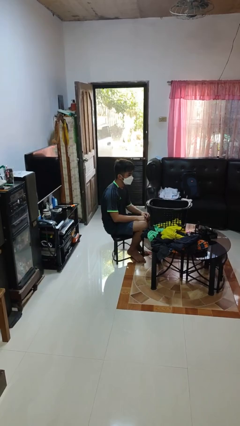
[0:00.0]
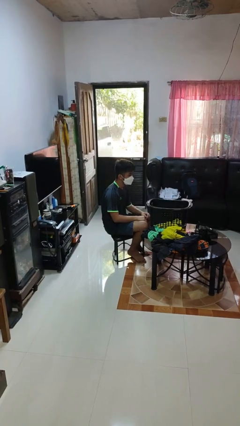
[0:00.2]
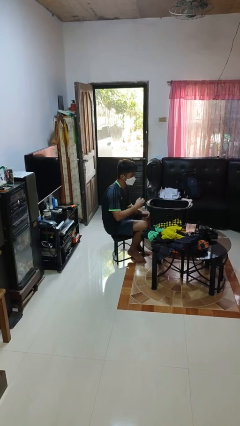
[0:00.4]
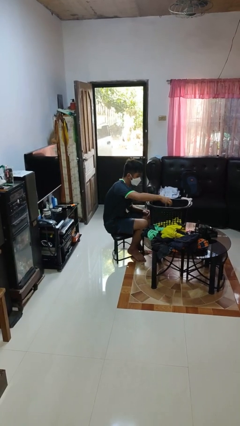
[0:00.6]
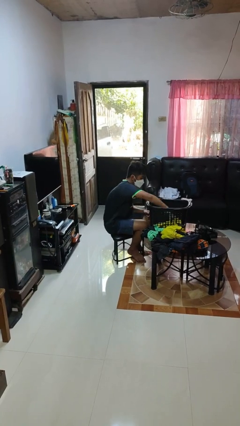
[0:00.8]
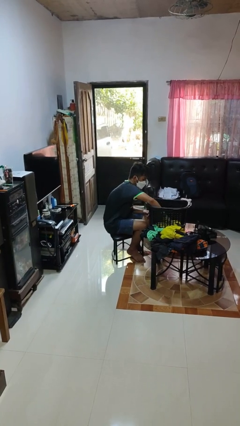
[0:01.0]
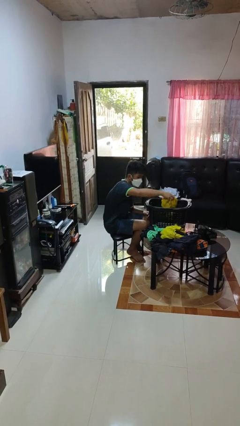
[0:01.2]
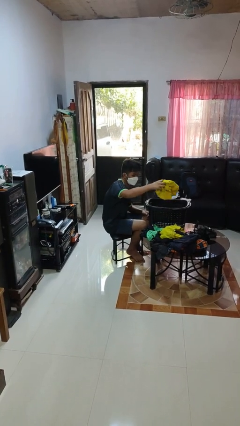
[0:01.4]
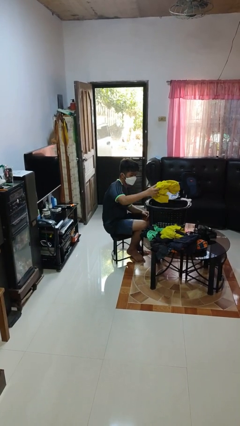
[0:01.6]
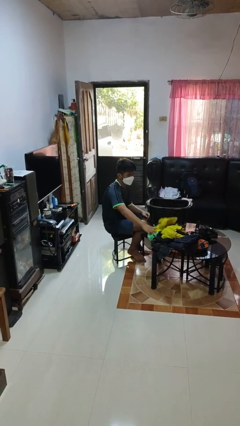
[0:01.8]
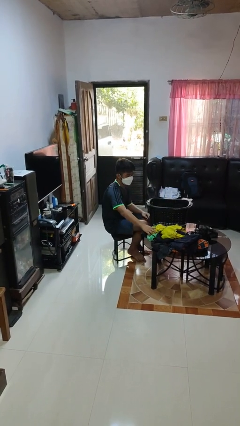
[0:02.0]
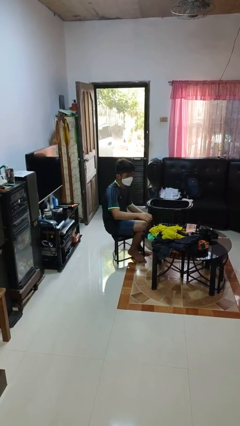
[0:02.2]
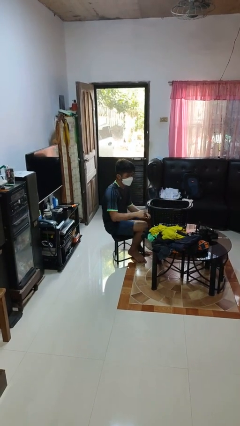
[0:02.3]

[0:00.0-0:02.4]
person takes object from basket

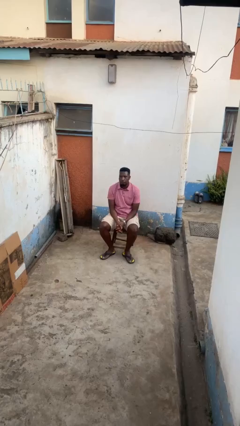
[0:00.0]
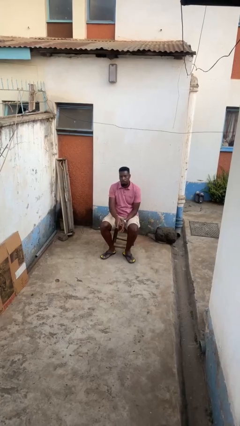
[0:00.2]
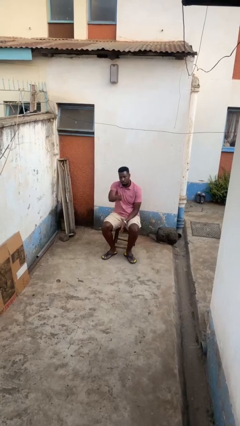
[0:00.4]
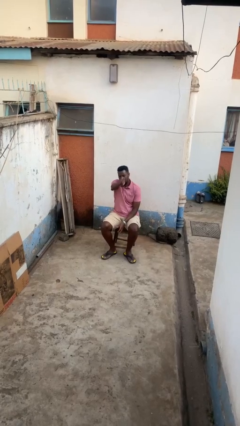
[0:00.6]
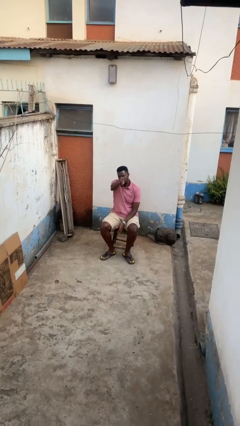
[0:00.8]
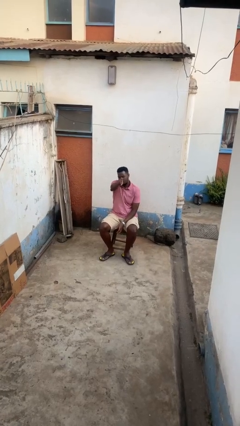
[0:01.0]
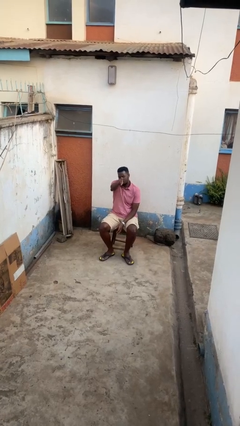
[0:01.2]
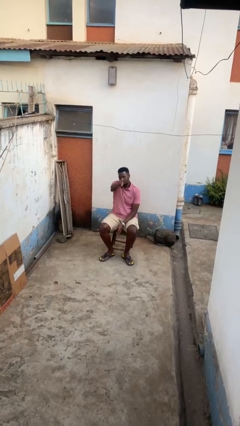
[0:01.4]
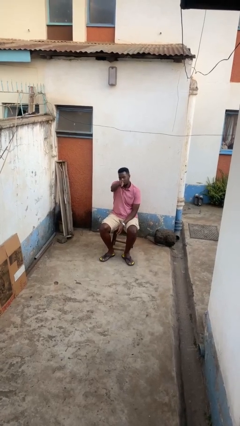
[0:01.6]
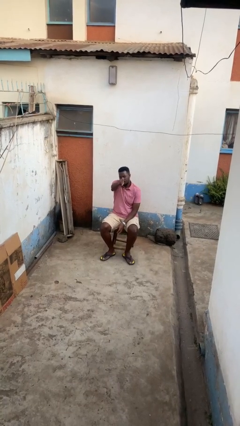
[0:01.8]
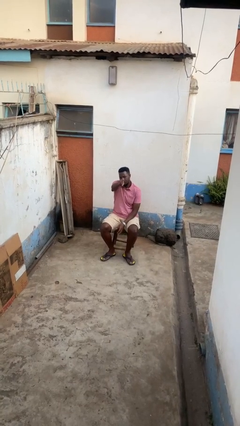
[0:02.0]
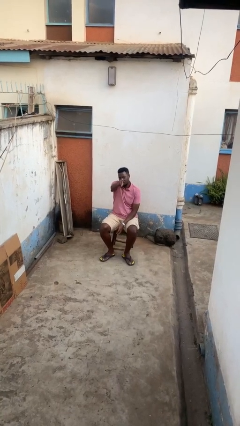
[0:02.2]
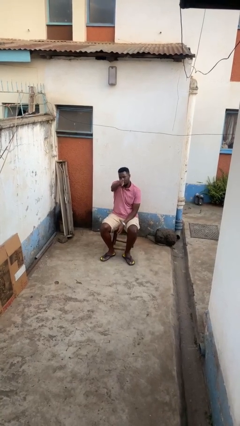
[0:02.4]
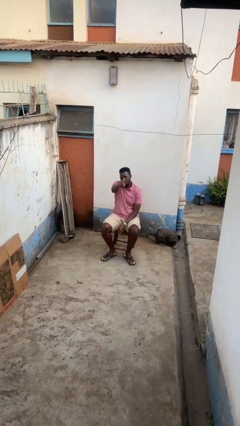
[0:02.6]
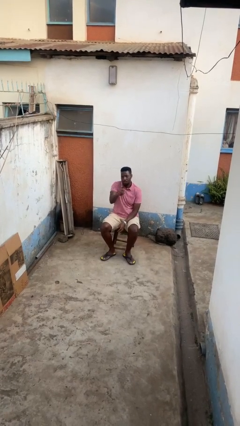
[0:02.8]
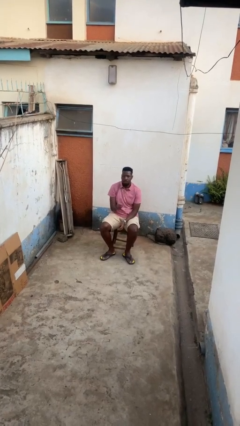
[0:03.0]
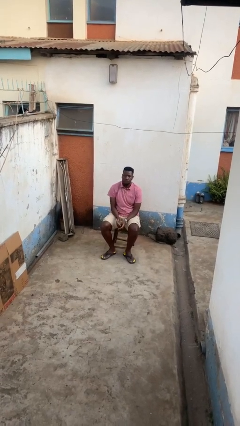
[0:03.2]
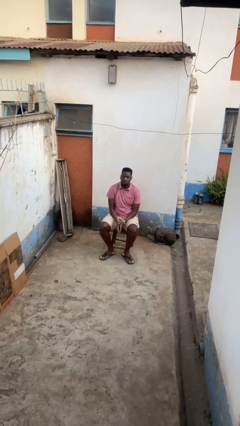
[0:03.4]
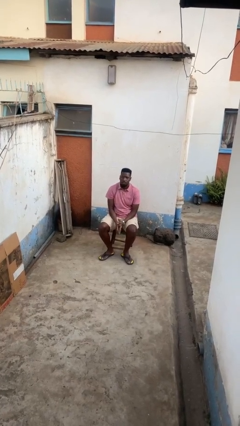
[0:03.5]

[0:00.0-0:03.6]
person points at person

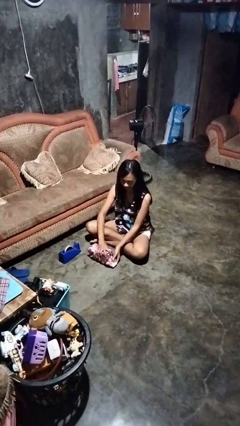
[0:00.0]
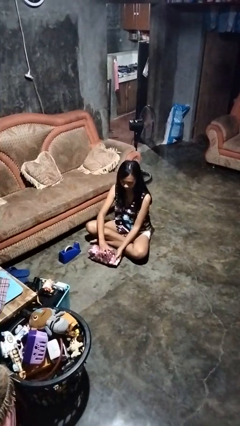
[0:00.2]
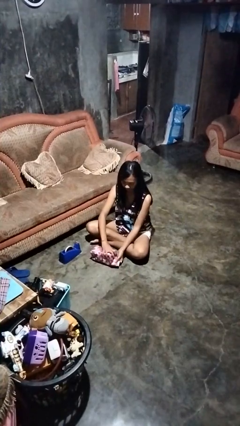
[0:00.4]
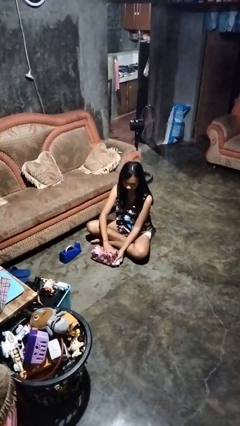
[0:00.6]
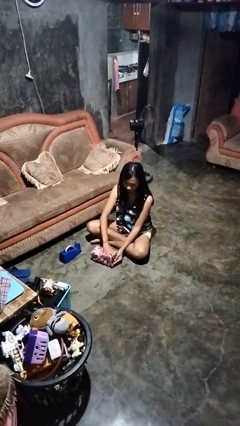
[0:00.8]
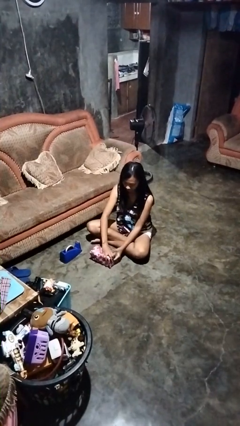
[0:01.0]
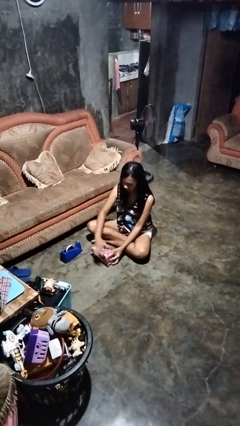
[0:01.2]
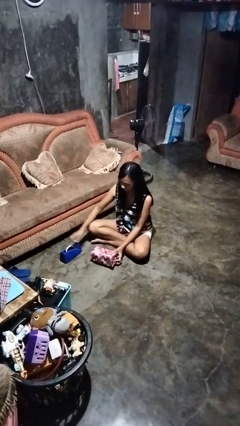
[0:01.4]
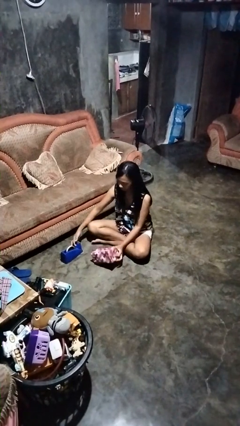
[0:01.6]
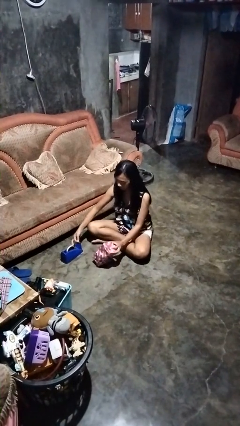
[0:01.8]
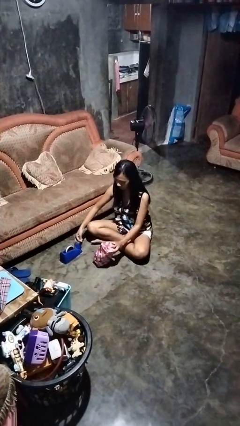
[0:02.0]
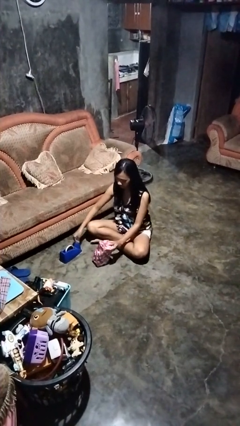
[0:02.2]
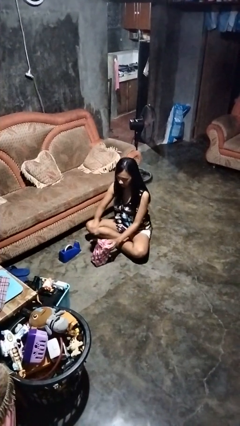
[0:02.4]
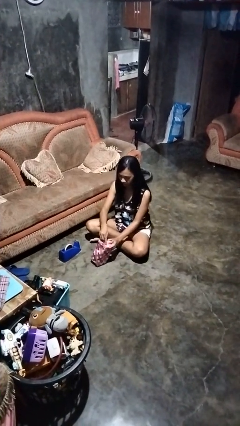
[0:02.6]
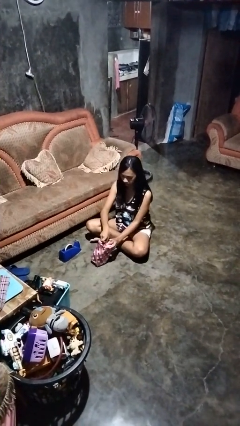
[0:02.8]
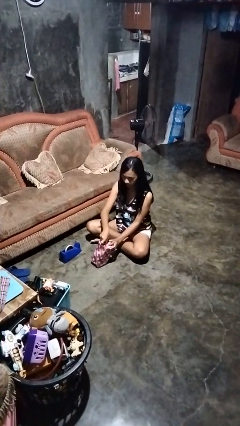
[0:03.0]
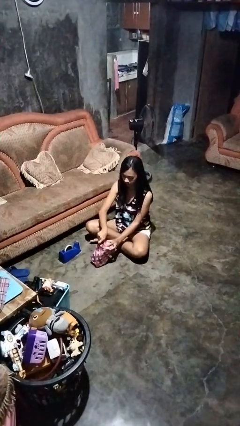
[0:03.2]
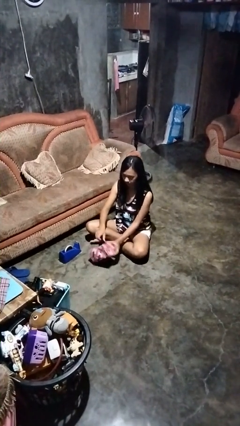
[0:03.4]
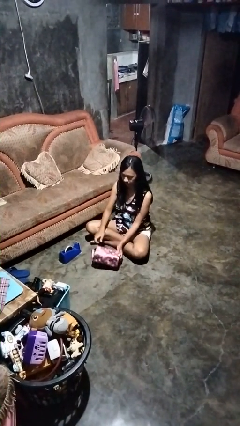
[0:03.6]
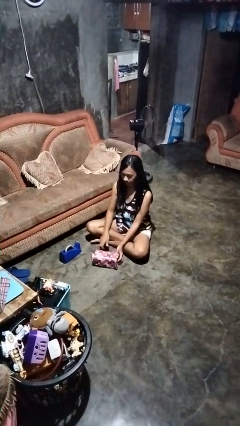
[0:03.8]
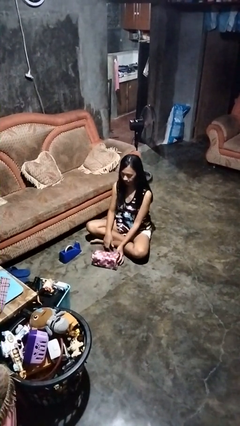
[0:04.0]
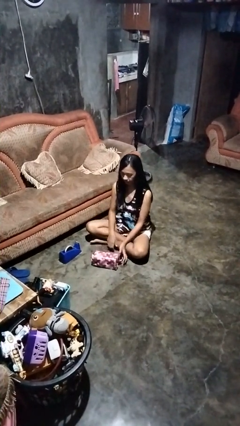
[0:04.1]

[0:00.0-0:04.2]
person wraps box

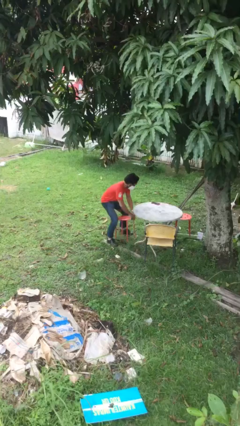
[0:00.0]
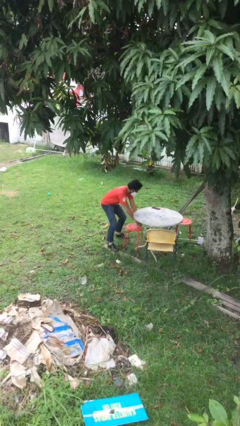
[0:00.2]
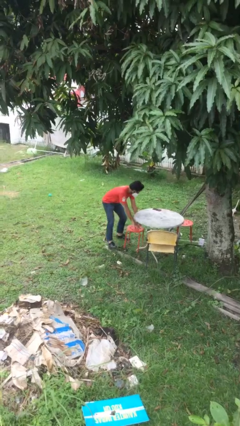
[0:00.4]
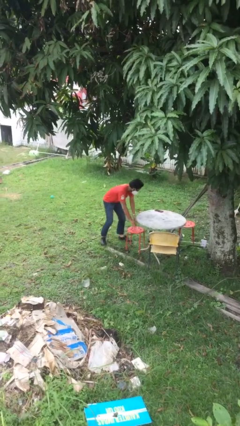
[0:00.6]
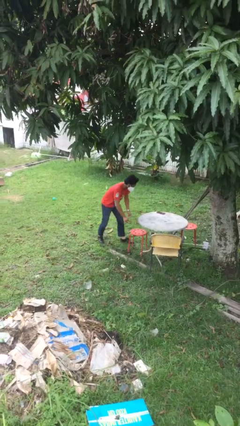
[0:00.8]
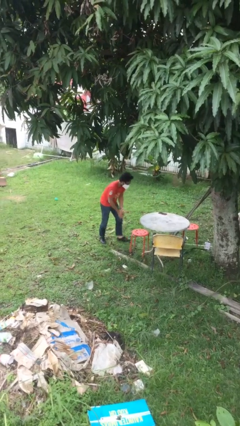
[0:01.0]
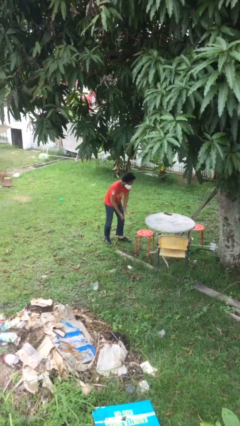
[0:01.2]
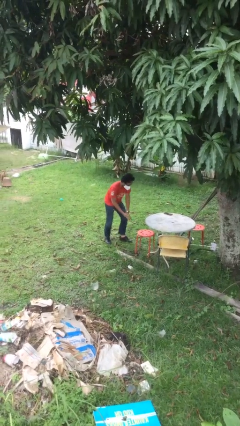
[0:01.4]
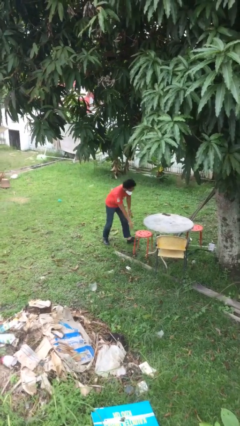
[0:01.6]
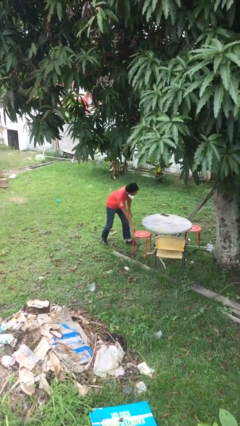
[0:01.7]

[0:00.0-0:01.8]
person stands up

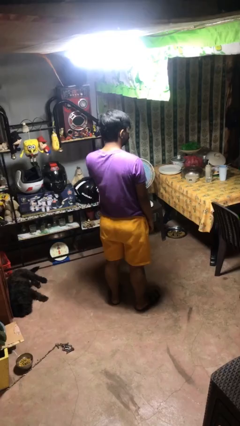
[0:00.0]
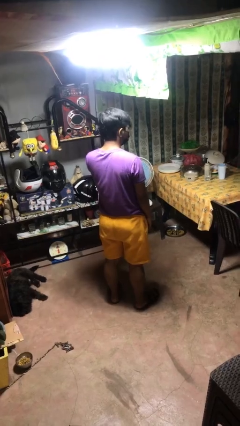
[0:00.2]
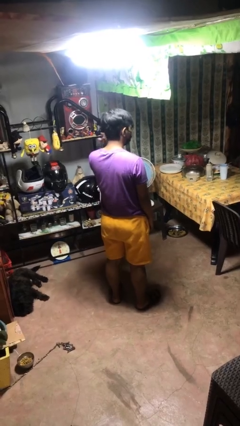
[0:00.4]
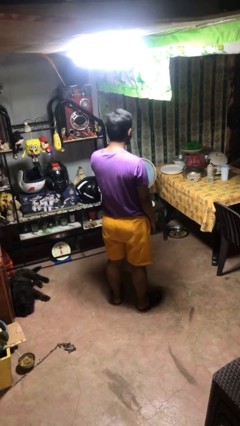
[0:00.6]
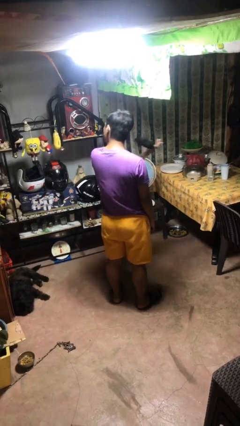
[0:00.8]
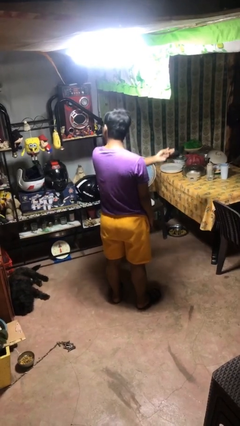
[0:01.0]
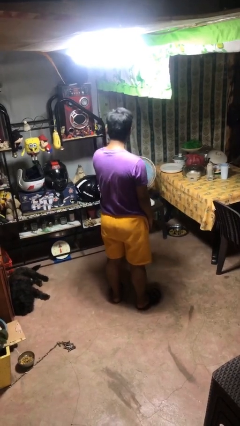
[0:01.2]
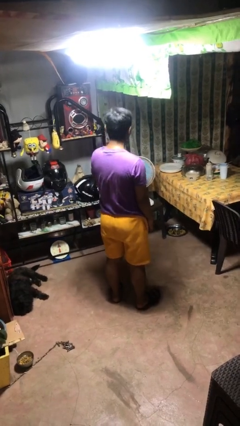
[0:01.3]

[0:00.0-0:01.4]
person takes off facemask

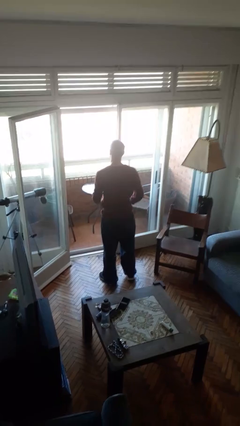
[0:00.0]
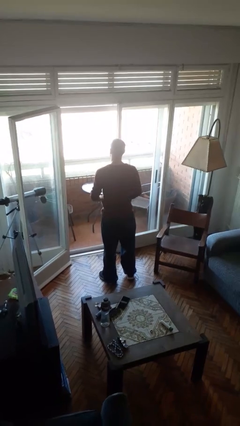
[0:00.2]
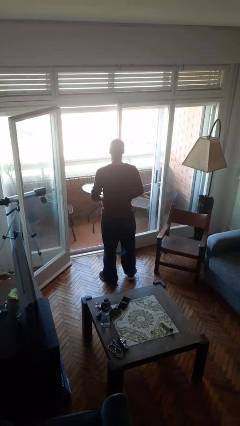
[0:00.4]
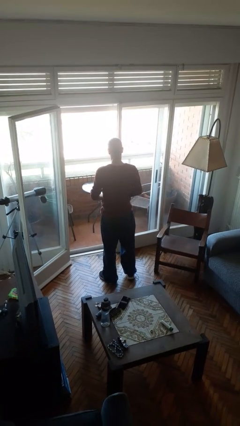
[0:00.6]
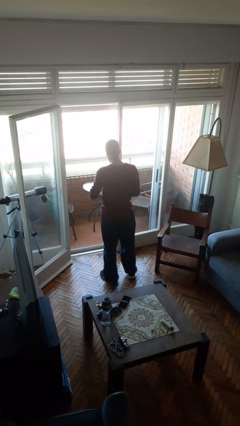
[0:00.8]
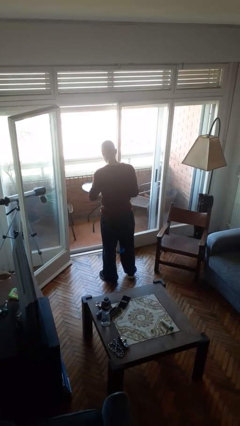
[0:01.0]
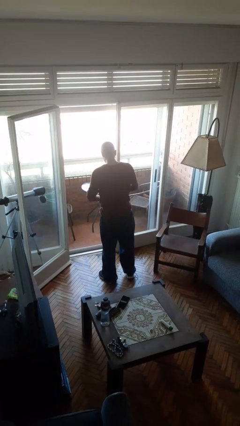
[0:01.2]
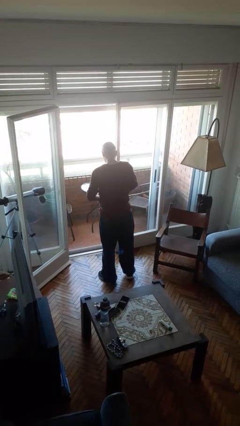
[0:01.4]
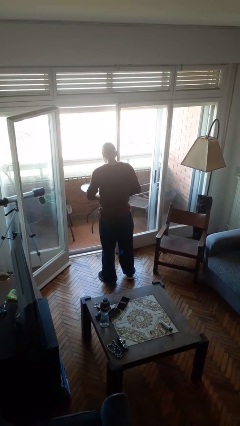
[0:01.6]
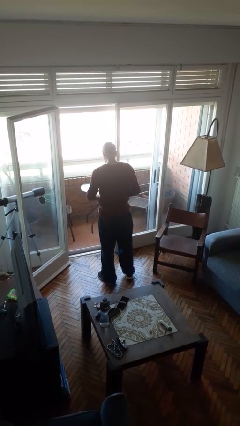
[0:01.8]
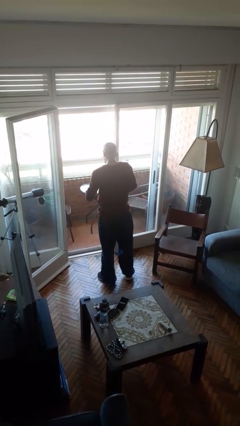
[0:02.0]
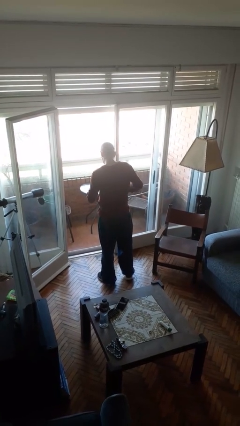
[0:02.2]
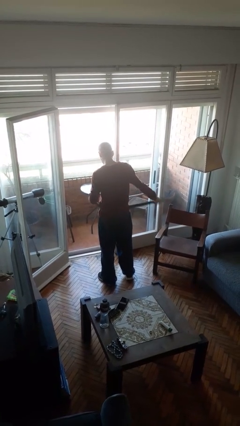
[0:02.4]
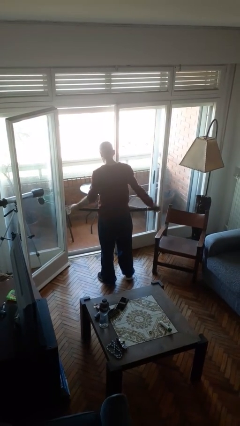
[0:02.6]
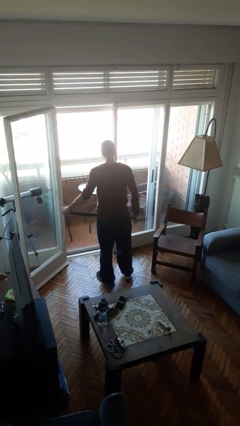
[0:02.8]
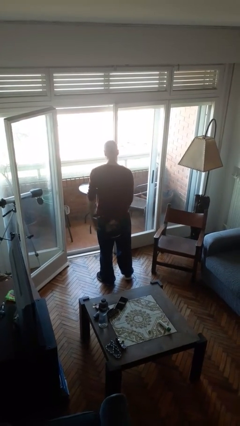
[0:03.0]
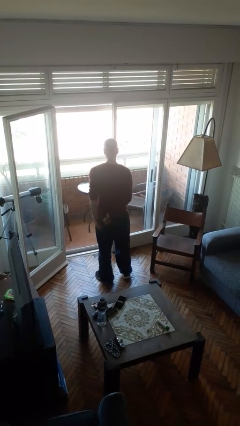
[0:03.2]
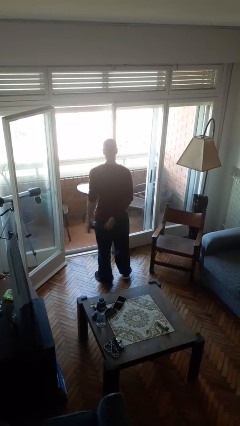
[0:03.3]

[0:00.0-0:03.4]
person takes off belt

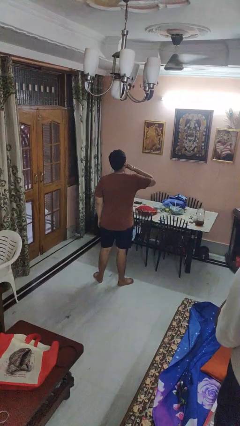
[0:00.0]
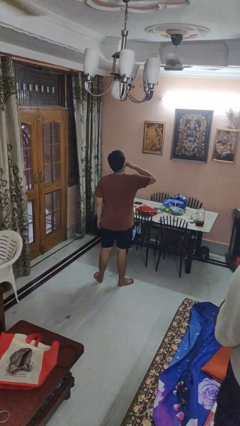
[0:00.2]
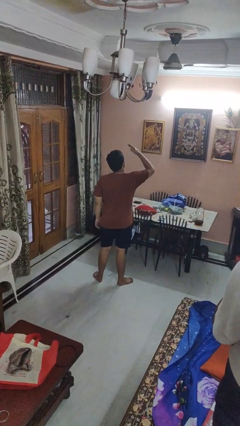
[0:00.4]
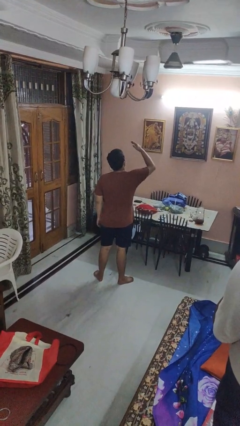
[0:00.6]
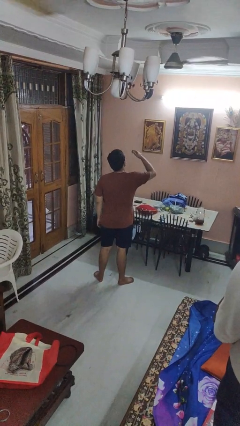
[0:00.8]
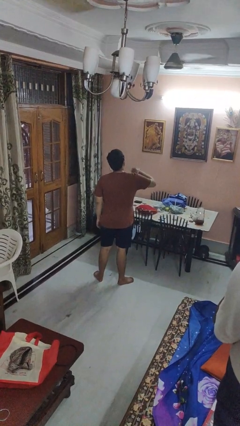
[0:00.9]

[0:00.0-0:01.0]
person gestures blow kiss
